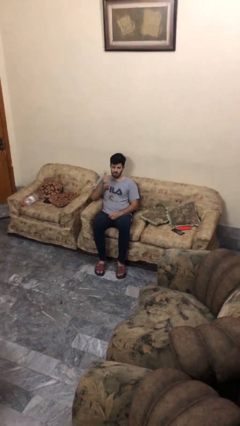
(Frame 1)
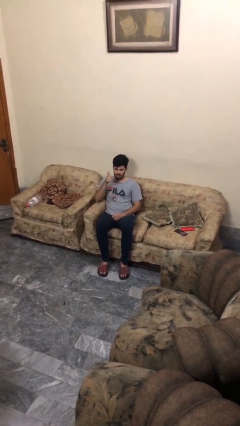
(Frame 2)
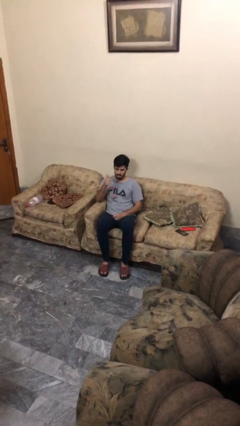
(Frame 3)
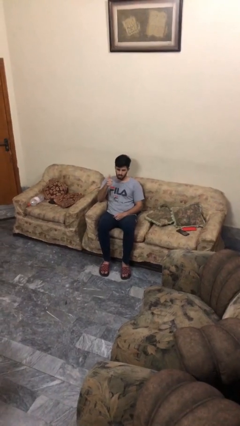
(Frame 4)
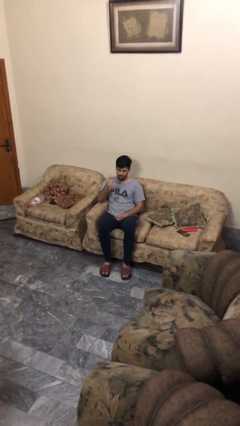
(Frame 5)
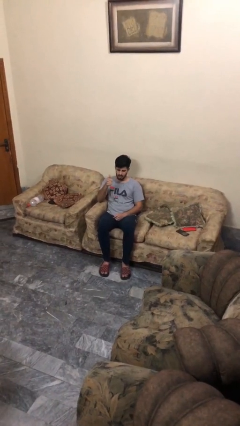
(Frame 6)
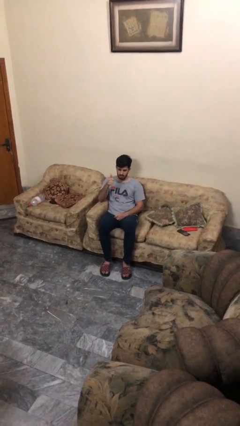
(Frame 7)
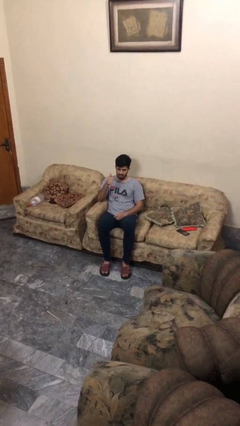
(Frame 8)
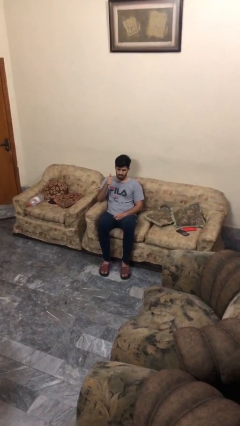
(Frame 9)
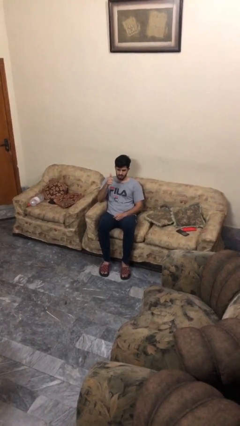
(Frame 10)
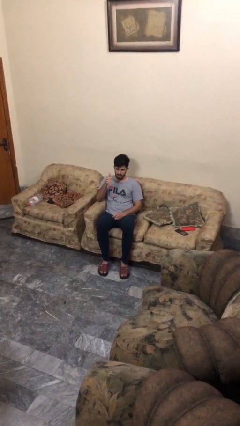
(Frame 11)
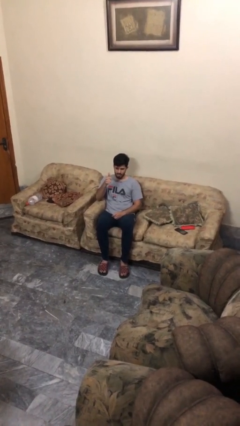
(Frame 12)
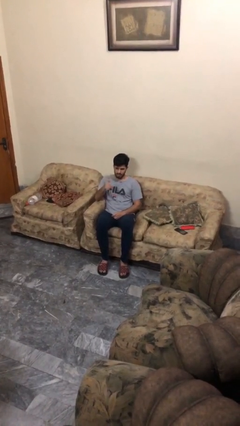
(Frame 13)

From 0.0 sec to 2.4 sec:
person gestures thumbs up

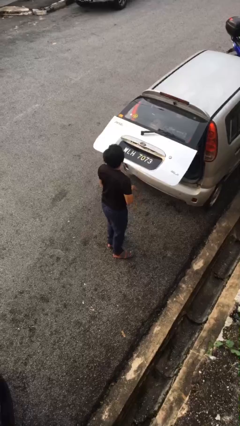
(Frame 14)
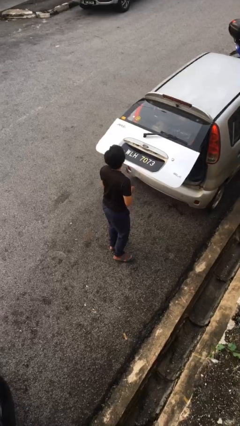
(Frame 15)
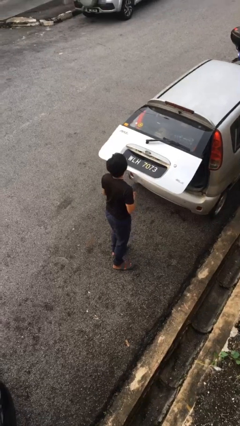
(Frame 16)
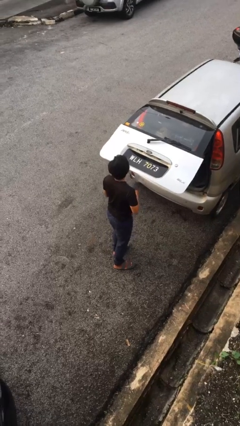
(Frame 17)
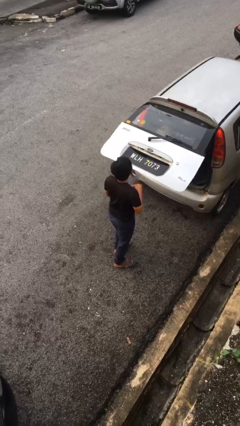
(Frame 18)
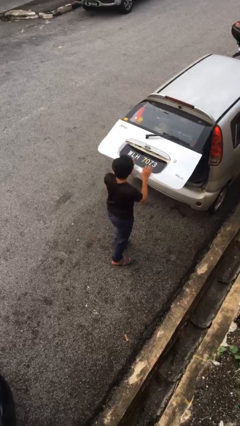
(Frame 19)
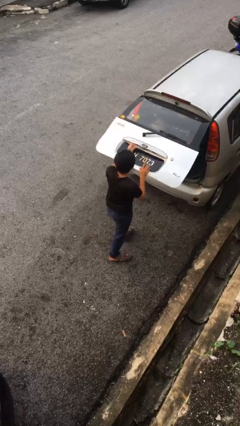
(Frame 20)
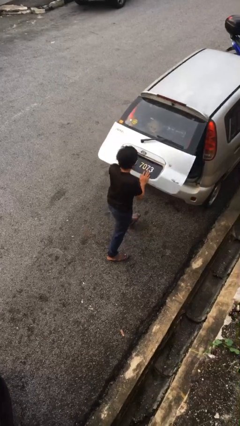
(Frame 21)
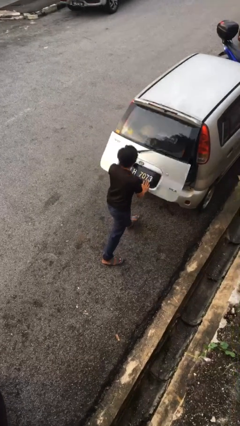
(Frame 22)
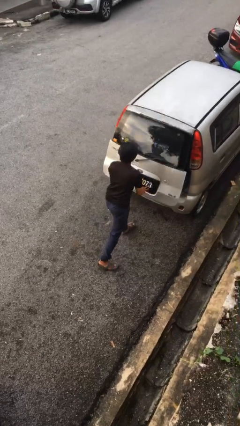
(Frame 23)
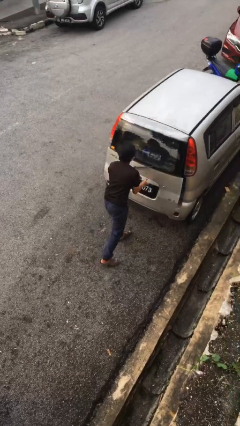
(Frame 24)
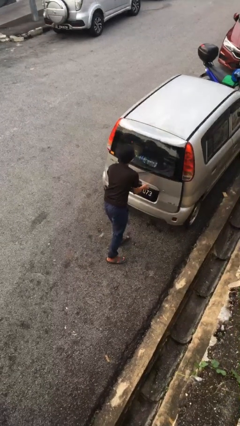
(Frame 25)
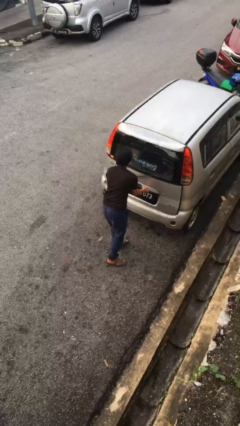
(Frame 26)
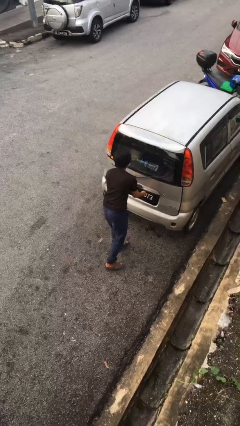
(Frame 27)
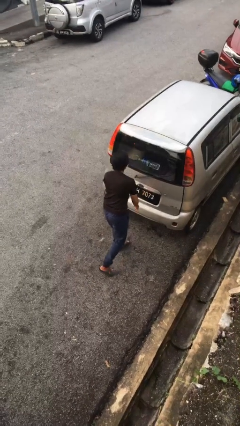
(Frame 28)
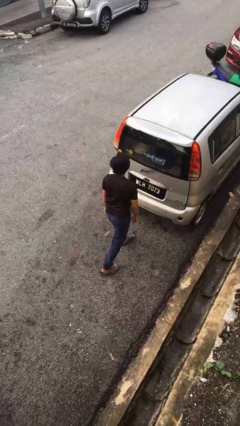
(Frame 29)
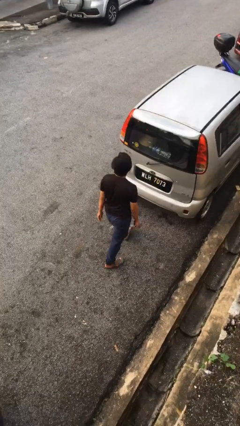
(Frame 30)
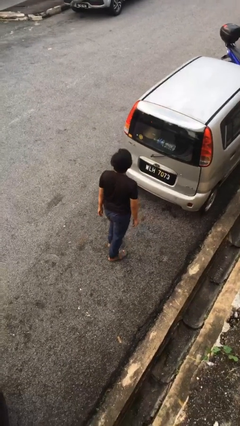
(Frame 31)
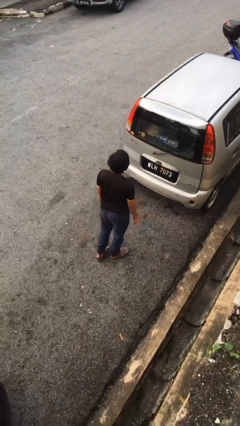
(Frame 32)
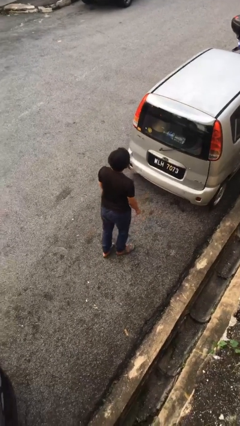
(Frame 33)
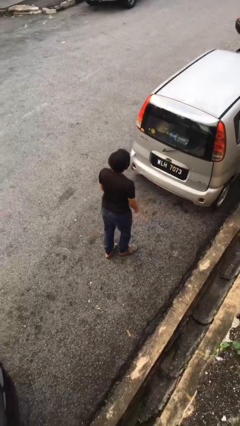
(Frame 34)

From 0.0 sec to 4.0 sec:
person closes car trunk

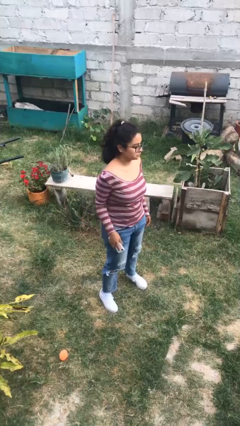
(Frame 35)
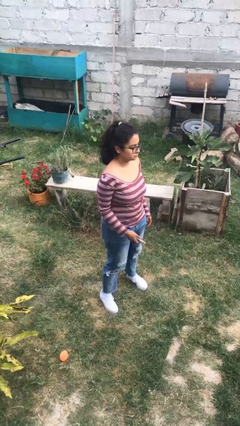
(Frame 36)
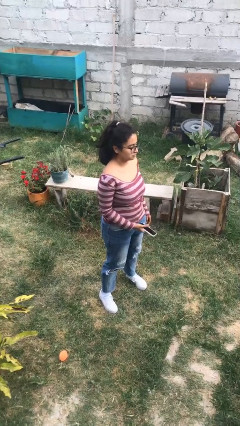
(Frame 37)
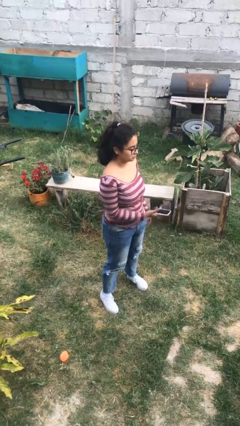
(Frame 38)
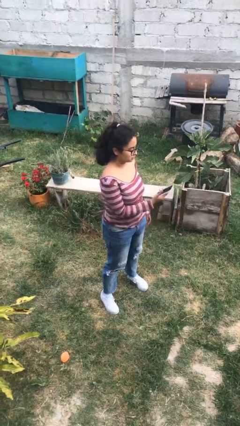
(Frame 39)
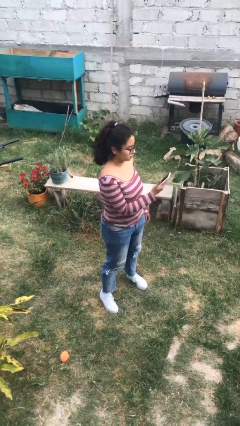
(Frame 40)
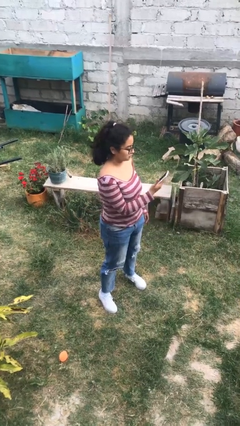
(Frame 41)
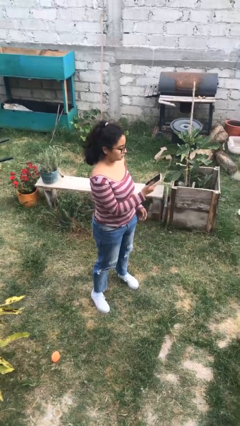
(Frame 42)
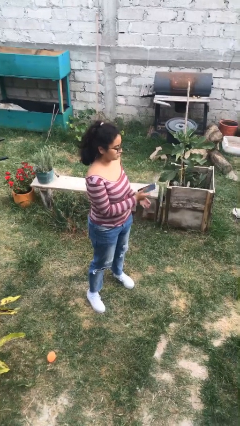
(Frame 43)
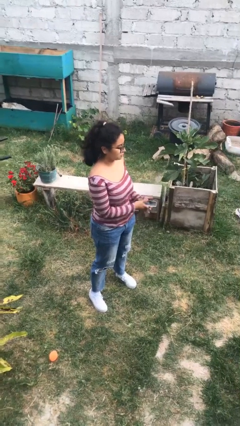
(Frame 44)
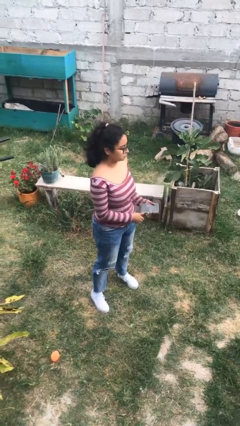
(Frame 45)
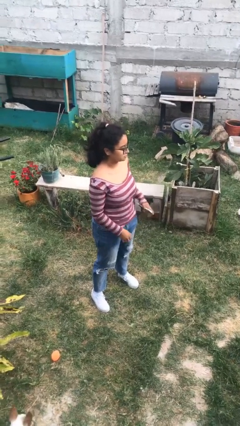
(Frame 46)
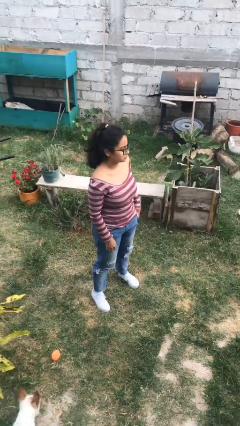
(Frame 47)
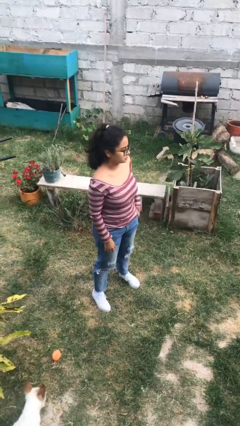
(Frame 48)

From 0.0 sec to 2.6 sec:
person puts phone into pocket

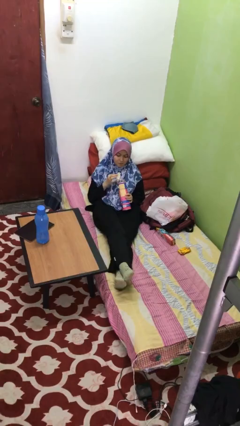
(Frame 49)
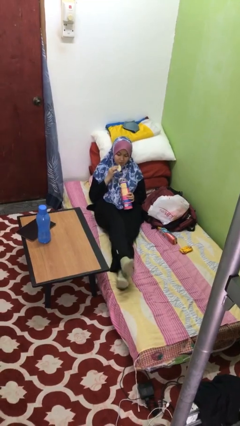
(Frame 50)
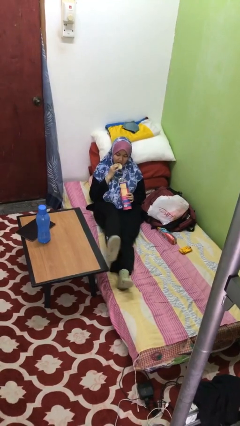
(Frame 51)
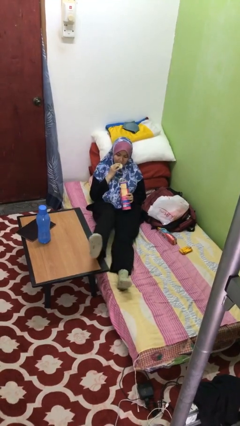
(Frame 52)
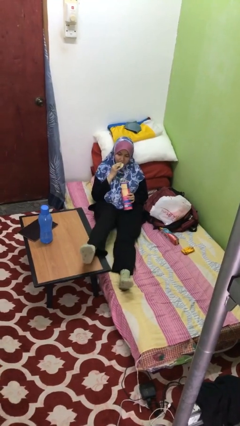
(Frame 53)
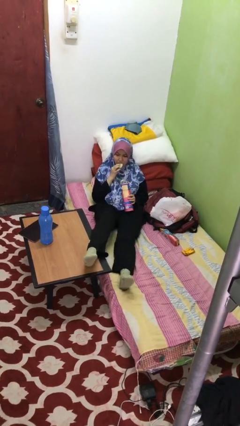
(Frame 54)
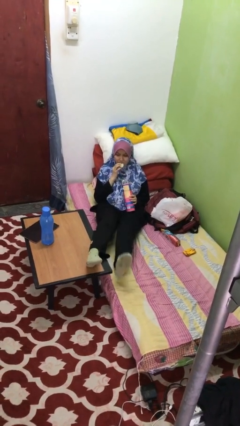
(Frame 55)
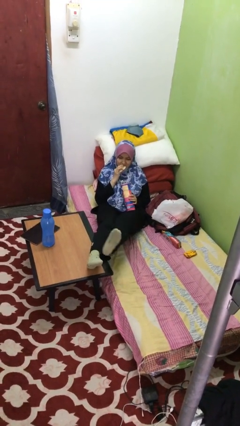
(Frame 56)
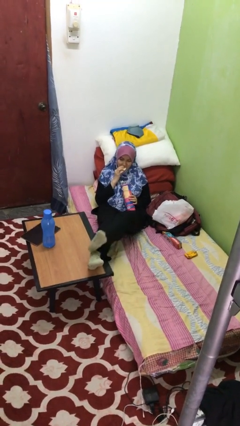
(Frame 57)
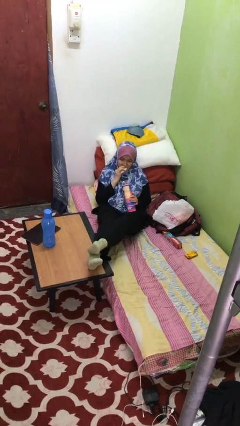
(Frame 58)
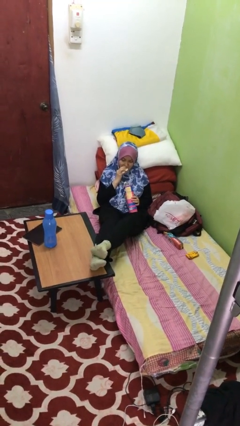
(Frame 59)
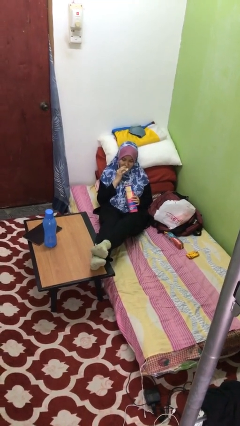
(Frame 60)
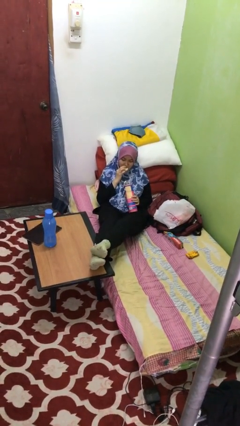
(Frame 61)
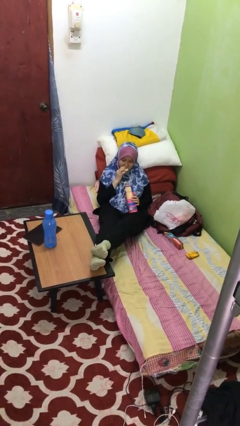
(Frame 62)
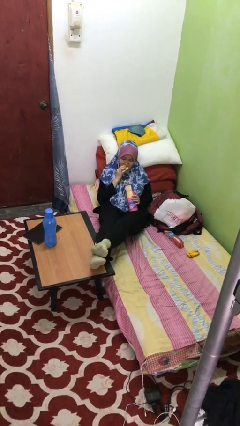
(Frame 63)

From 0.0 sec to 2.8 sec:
person puts feet up

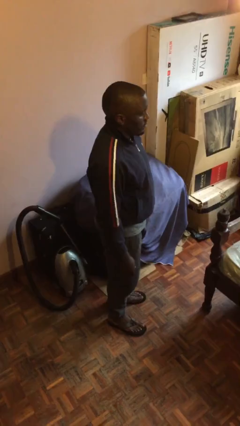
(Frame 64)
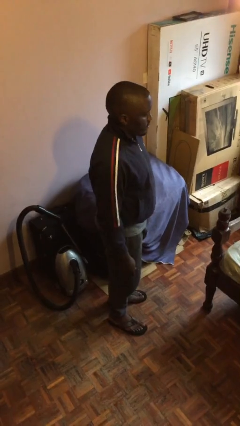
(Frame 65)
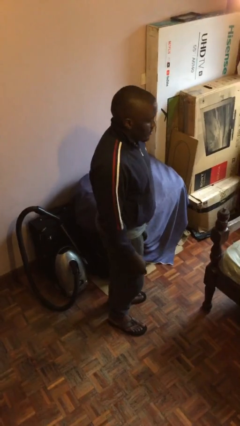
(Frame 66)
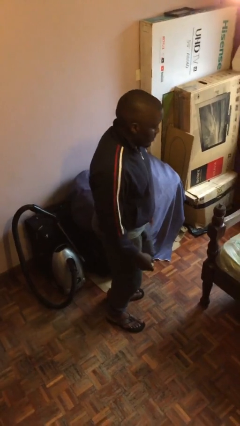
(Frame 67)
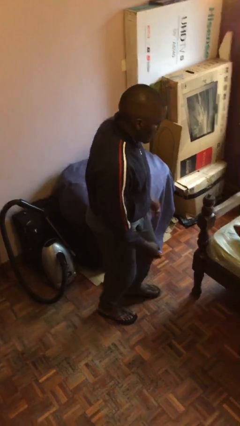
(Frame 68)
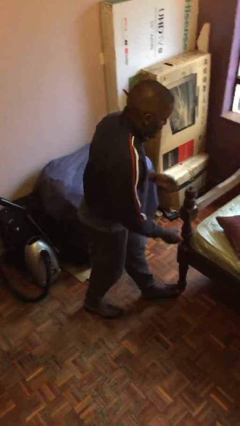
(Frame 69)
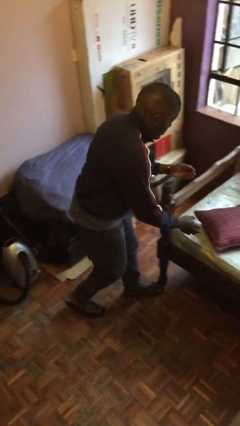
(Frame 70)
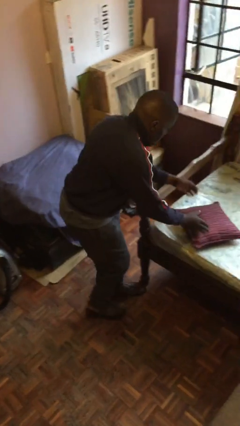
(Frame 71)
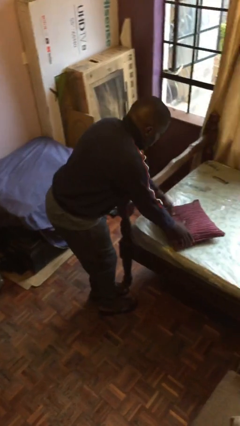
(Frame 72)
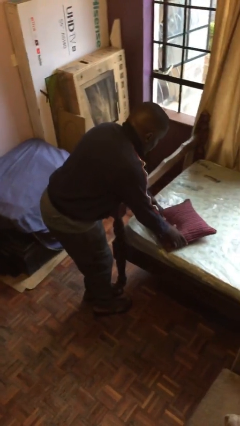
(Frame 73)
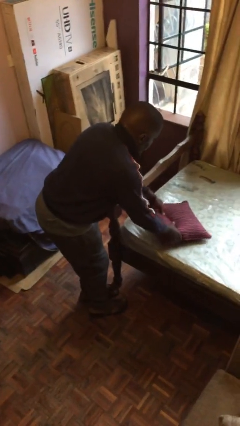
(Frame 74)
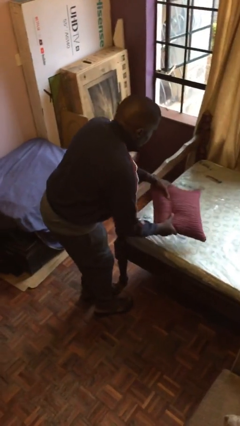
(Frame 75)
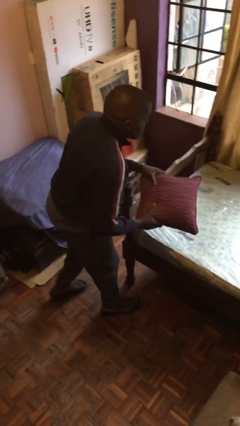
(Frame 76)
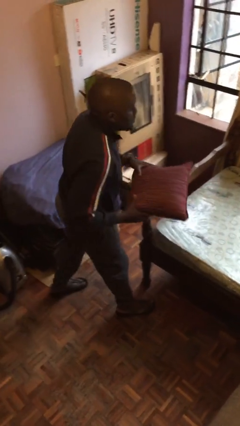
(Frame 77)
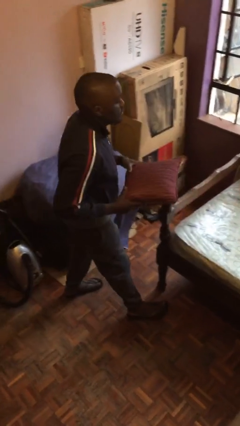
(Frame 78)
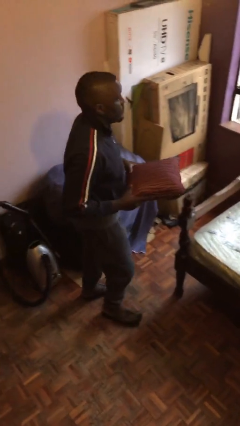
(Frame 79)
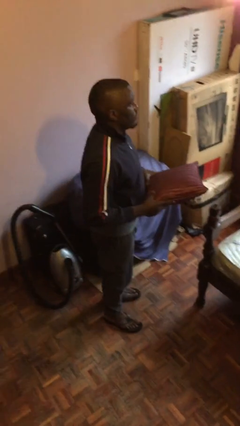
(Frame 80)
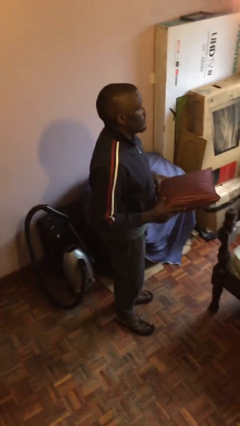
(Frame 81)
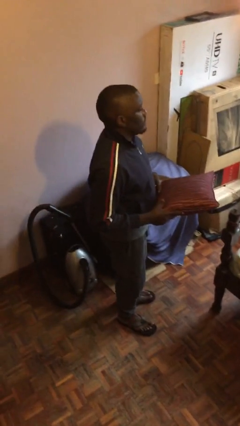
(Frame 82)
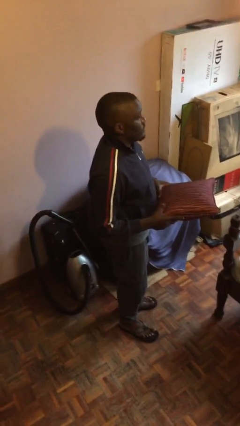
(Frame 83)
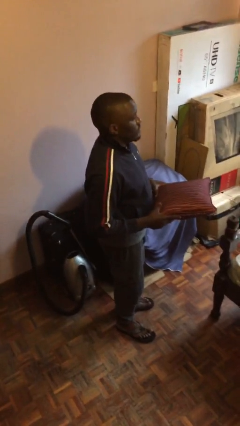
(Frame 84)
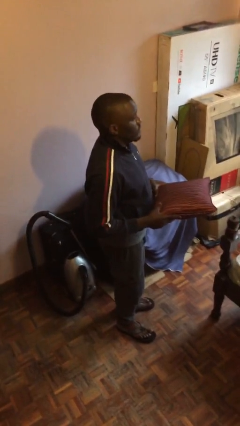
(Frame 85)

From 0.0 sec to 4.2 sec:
person picks up object from bed

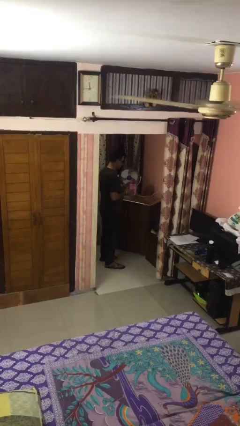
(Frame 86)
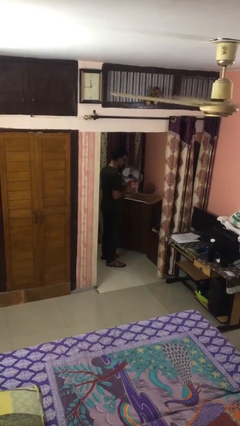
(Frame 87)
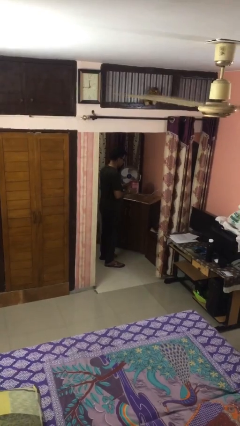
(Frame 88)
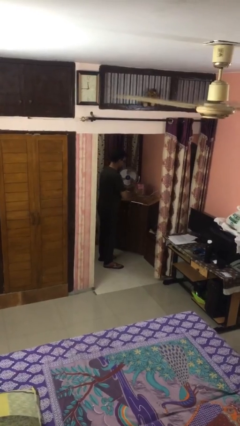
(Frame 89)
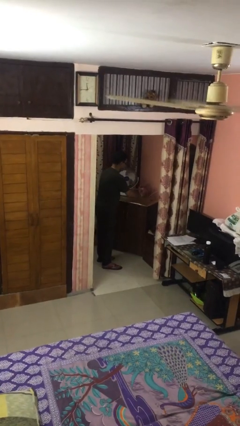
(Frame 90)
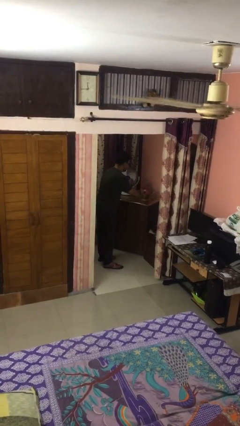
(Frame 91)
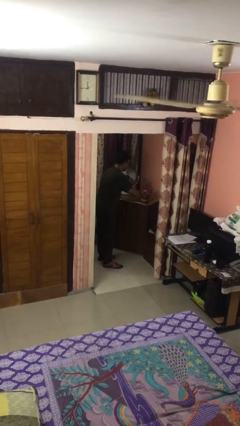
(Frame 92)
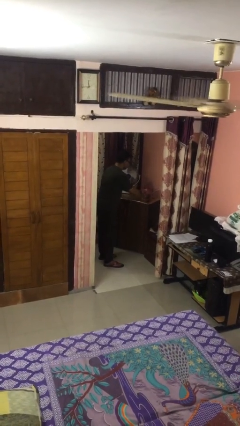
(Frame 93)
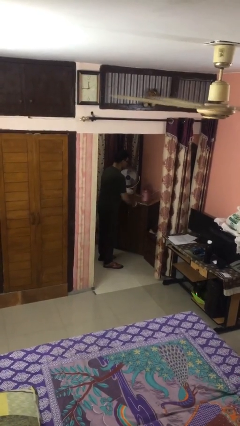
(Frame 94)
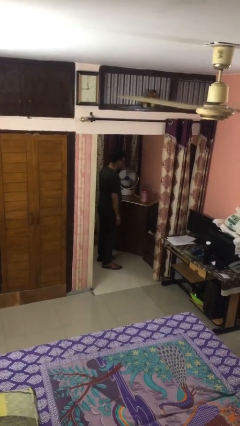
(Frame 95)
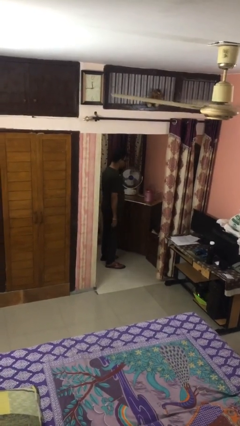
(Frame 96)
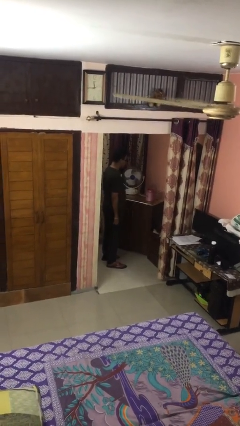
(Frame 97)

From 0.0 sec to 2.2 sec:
person puts down object on countertop
